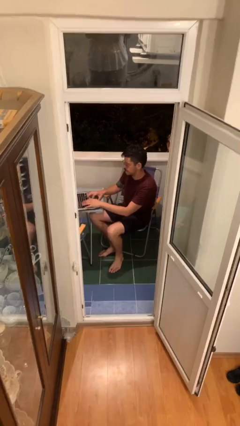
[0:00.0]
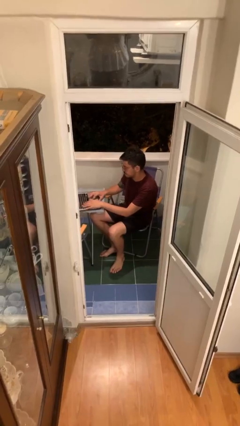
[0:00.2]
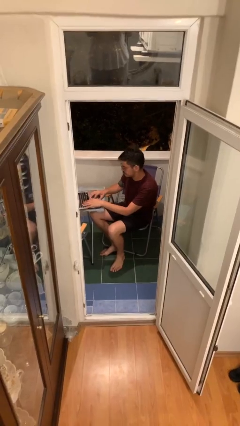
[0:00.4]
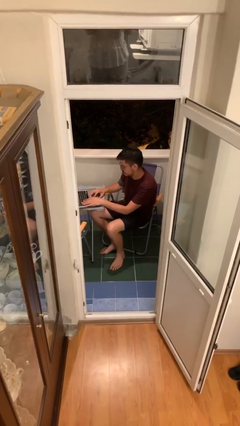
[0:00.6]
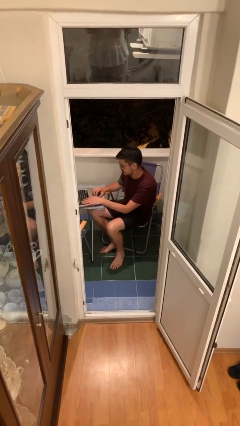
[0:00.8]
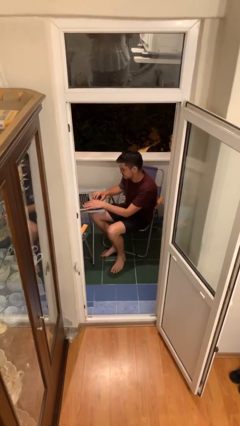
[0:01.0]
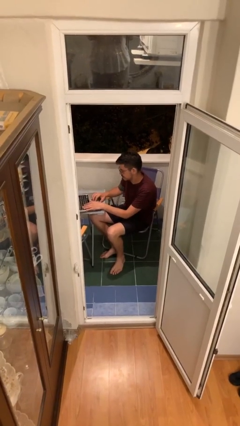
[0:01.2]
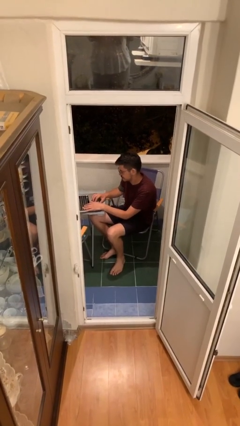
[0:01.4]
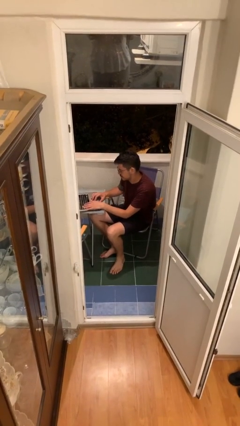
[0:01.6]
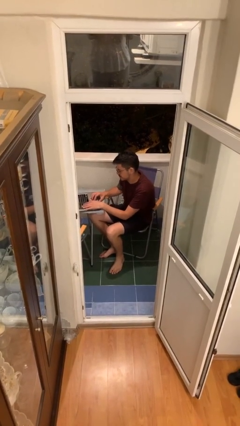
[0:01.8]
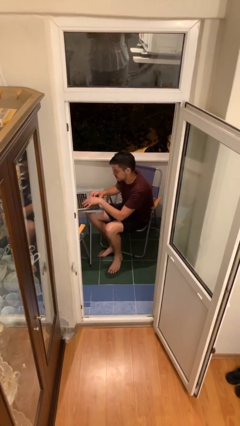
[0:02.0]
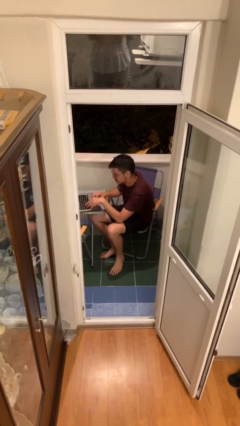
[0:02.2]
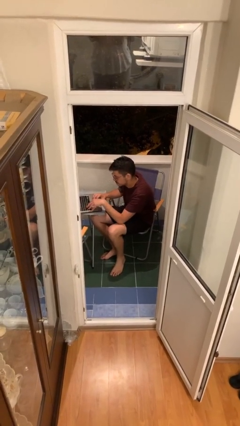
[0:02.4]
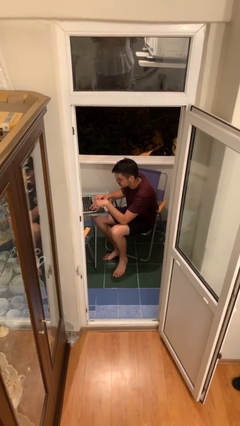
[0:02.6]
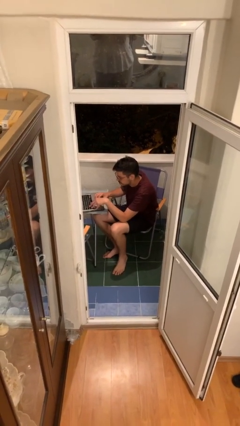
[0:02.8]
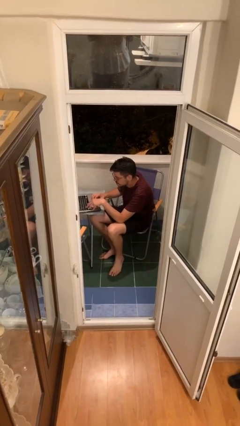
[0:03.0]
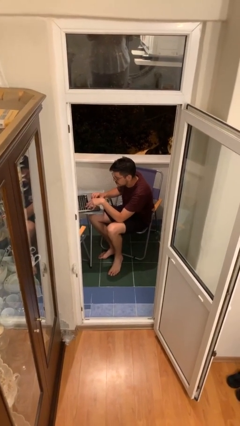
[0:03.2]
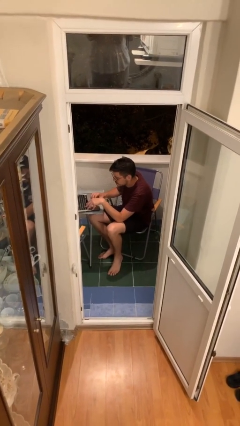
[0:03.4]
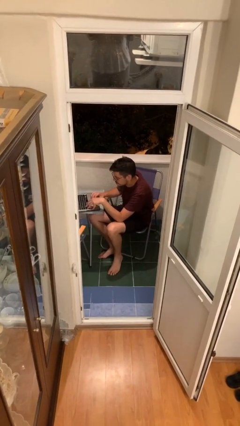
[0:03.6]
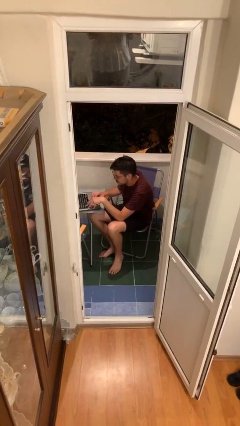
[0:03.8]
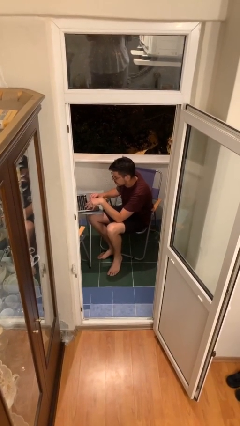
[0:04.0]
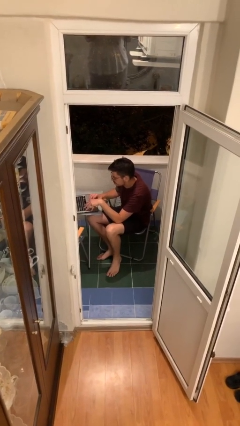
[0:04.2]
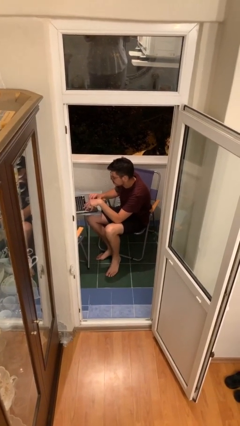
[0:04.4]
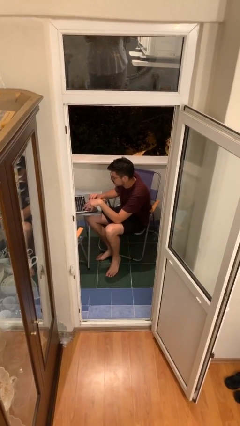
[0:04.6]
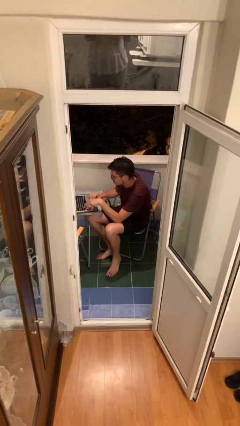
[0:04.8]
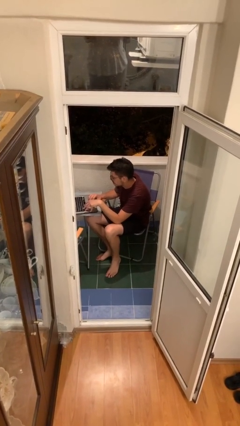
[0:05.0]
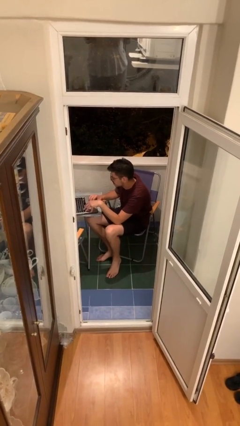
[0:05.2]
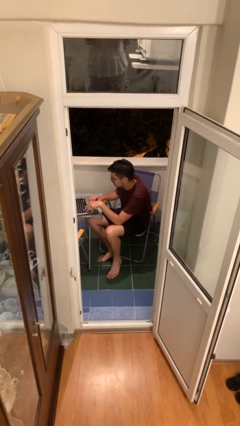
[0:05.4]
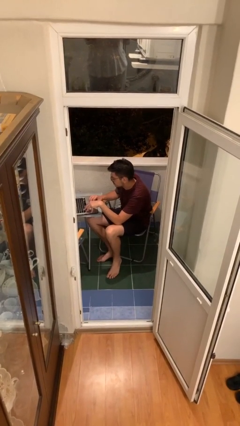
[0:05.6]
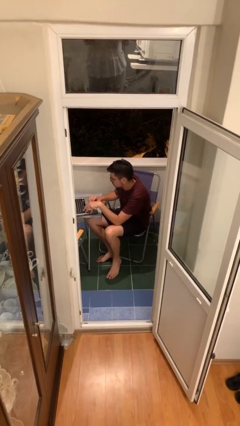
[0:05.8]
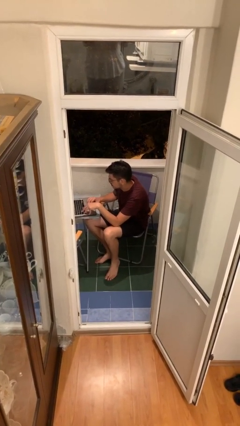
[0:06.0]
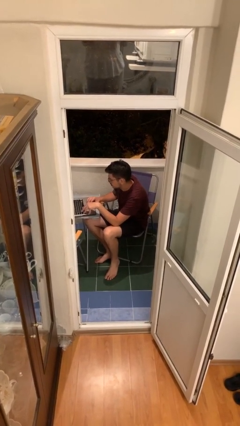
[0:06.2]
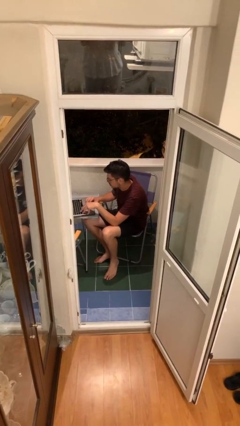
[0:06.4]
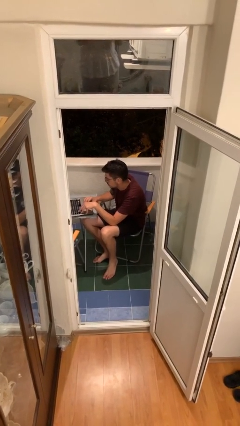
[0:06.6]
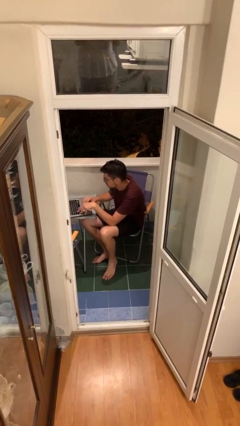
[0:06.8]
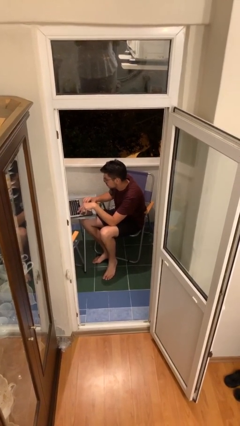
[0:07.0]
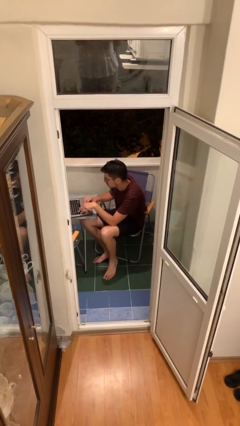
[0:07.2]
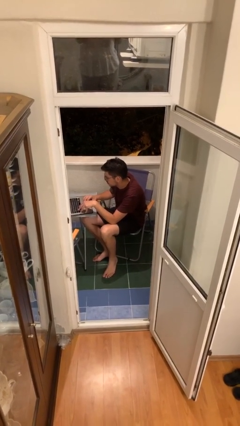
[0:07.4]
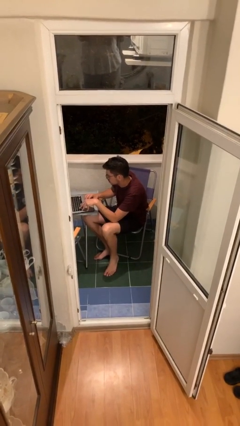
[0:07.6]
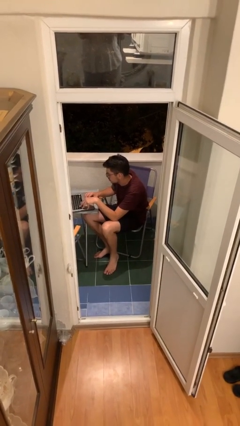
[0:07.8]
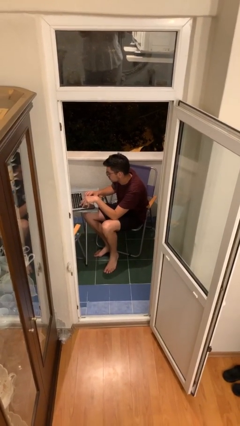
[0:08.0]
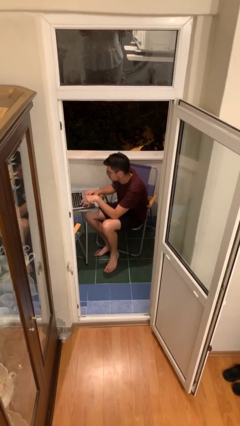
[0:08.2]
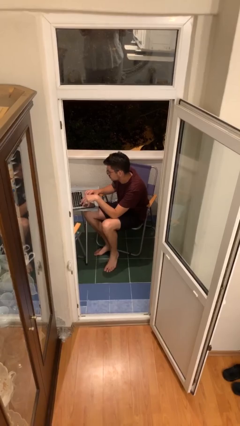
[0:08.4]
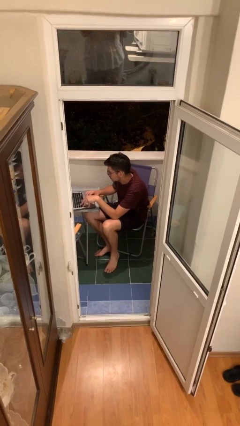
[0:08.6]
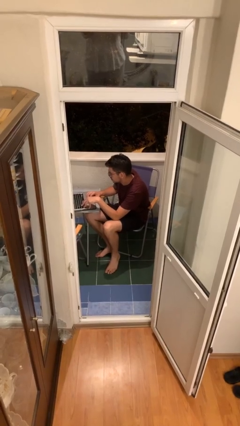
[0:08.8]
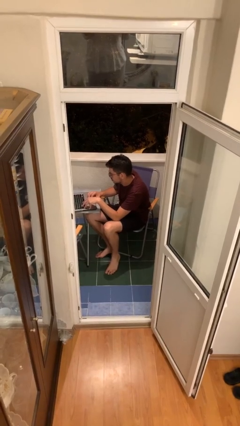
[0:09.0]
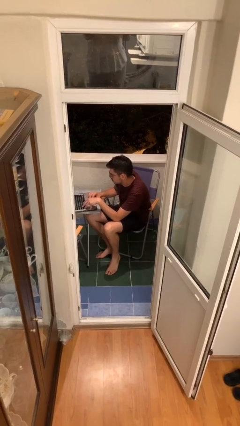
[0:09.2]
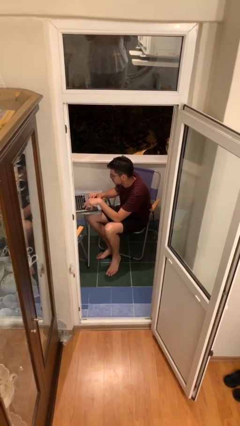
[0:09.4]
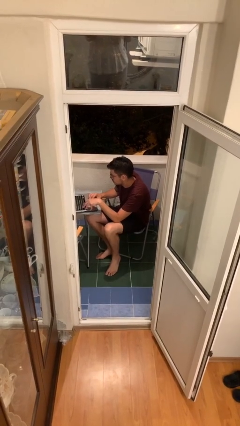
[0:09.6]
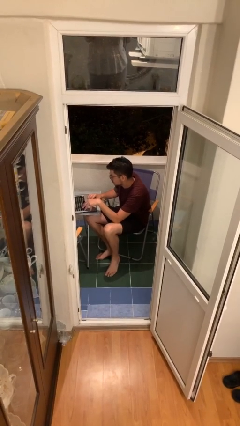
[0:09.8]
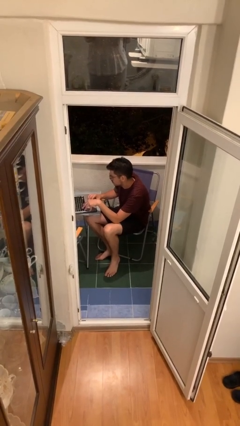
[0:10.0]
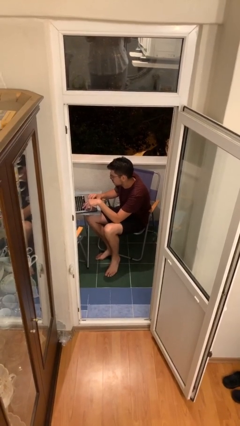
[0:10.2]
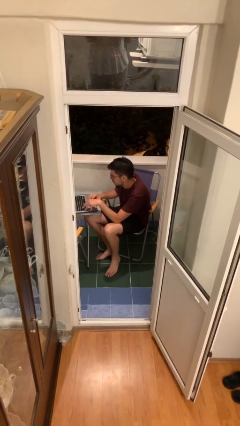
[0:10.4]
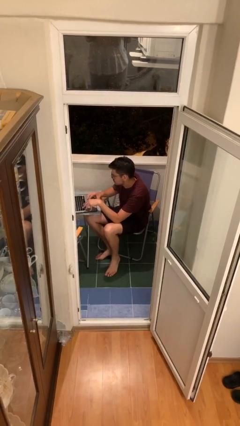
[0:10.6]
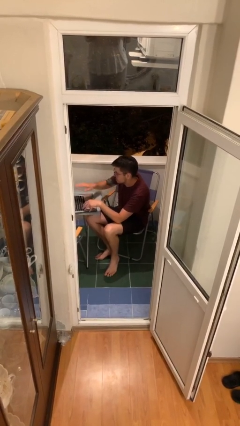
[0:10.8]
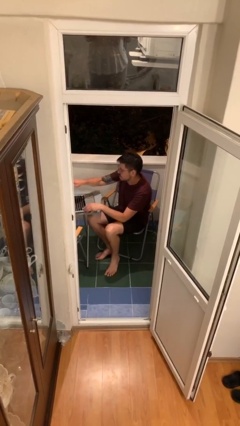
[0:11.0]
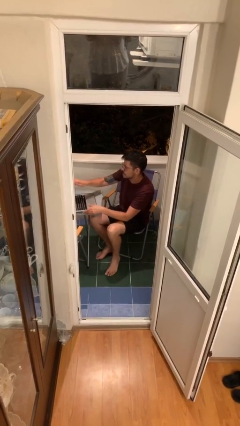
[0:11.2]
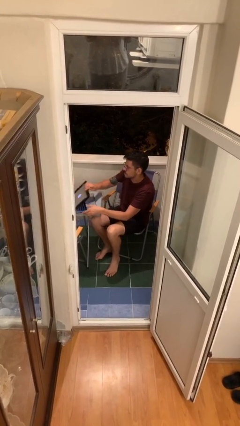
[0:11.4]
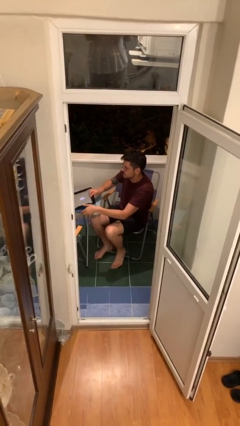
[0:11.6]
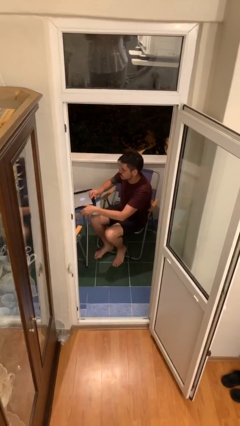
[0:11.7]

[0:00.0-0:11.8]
person interacts with laptop

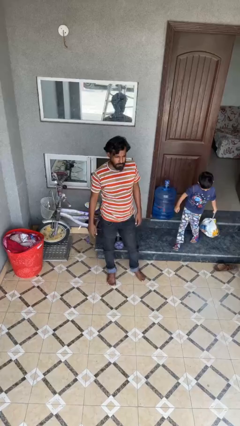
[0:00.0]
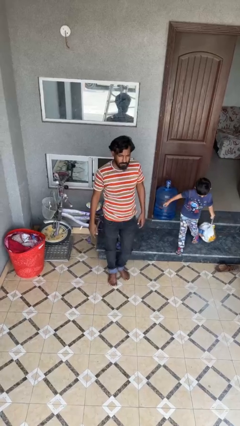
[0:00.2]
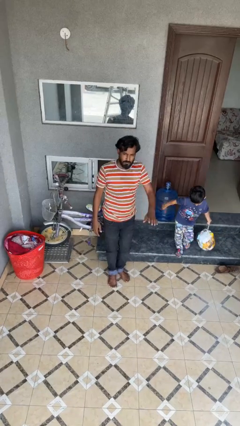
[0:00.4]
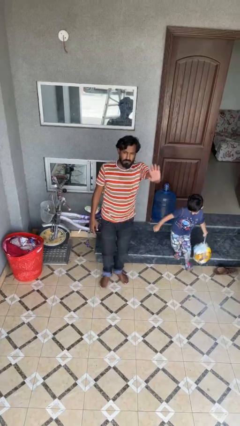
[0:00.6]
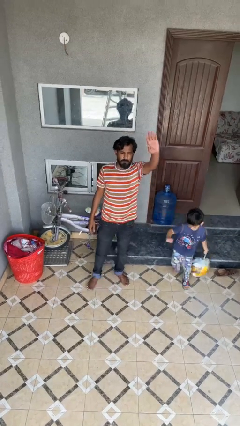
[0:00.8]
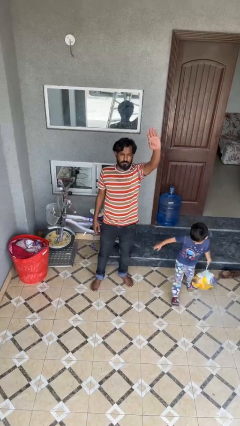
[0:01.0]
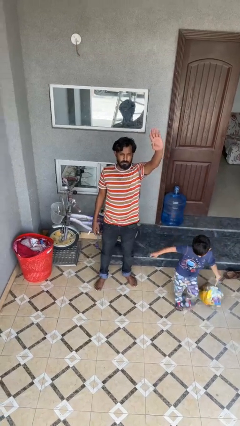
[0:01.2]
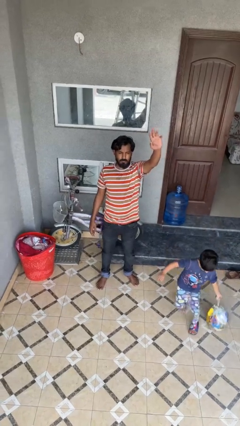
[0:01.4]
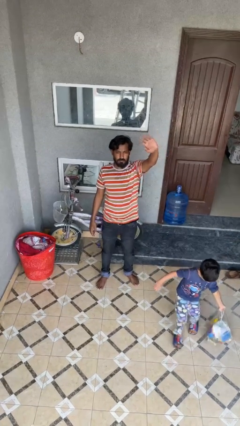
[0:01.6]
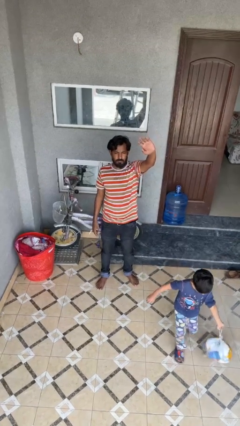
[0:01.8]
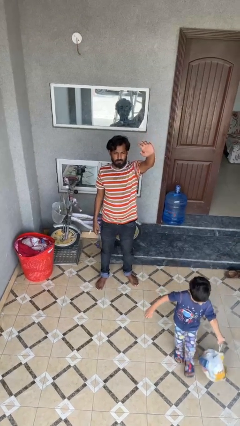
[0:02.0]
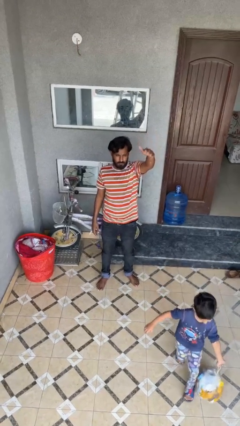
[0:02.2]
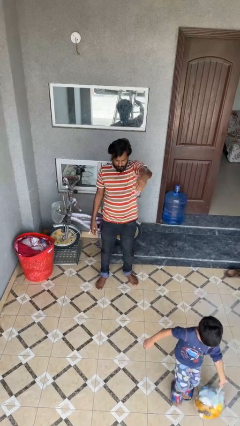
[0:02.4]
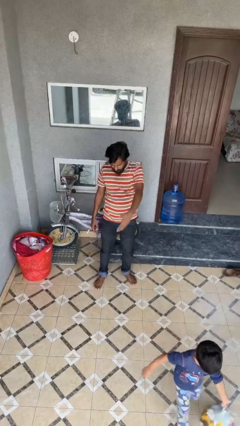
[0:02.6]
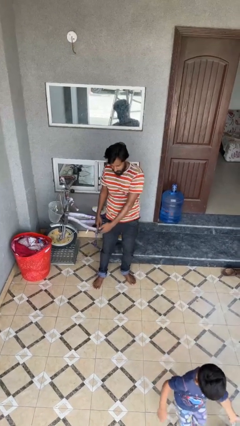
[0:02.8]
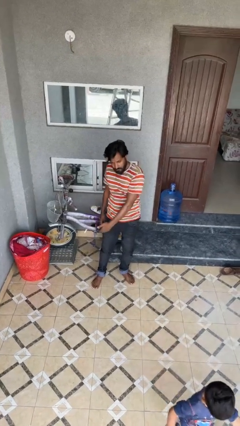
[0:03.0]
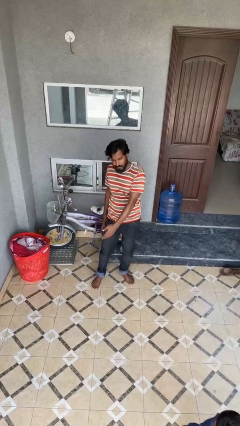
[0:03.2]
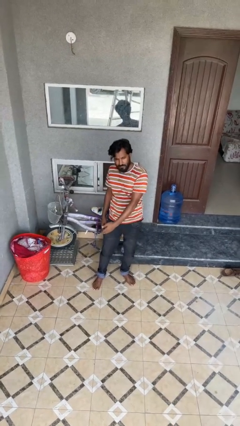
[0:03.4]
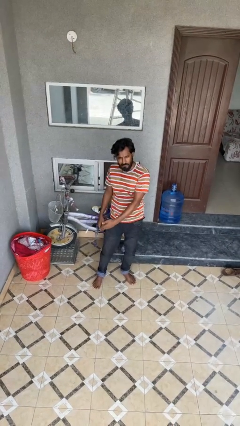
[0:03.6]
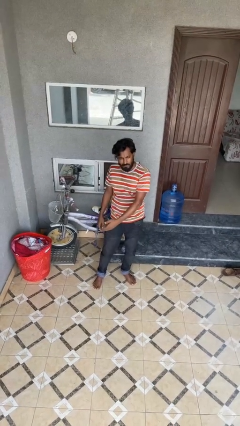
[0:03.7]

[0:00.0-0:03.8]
person gestures come here

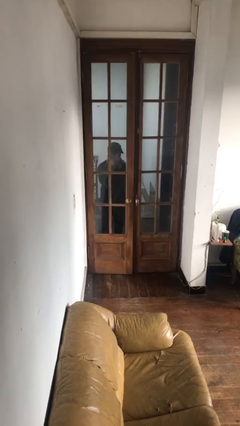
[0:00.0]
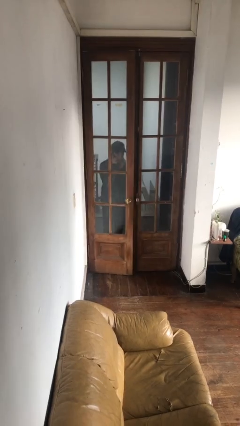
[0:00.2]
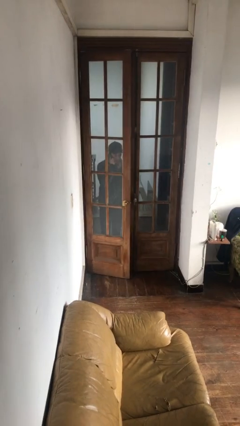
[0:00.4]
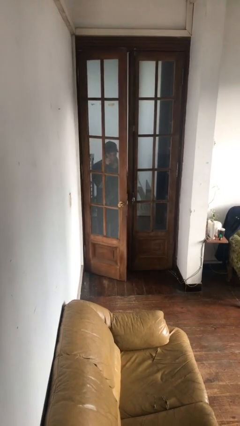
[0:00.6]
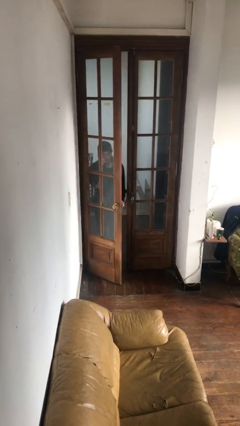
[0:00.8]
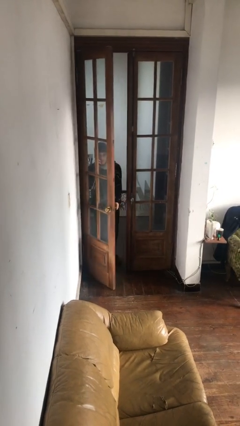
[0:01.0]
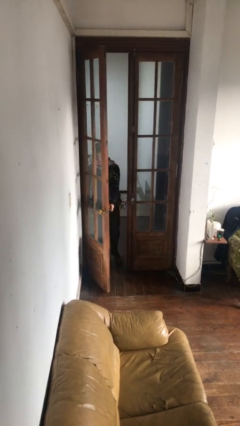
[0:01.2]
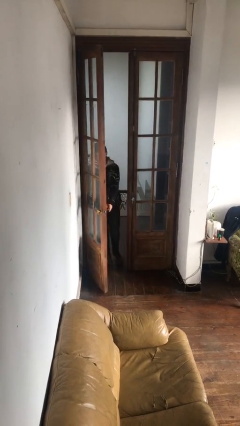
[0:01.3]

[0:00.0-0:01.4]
person opens facility door

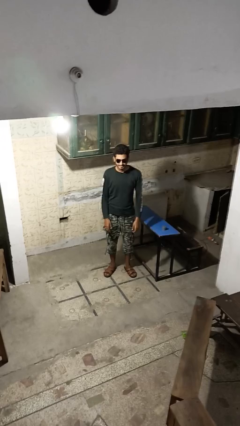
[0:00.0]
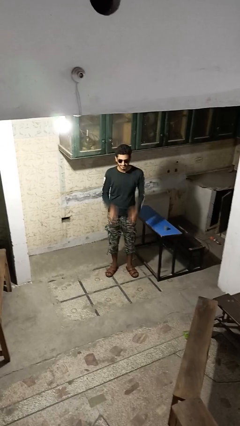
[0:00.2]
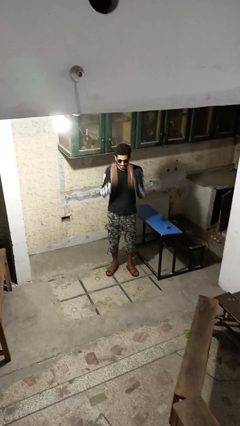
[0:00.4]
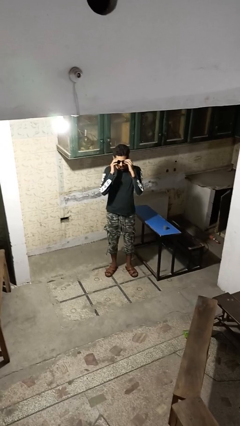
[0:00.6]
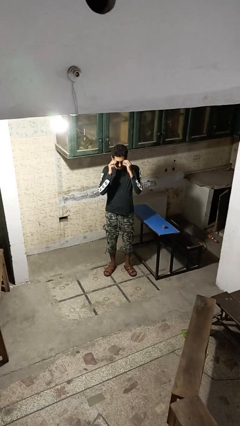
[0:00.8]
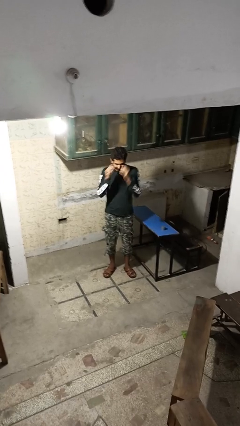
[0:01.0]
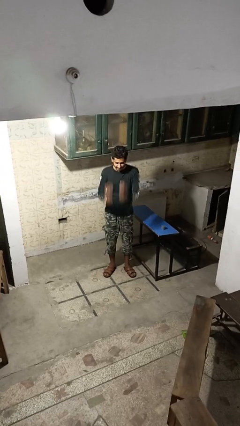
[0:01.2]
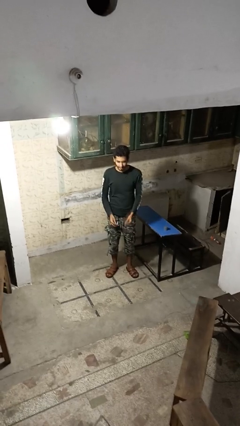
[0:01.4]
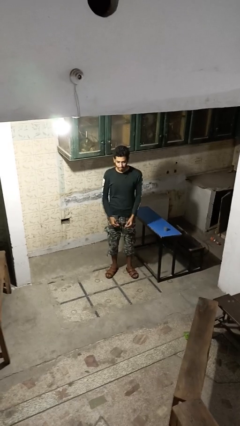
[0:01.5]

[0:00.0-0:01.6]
person takes off sunglasses
